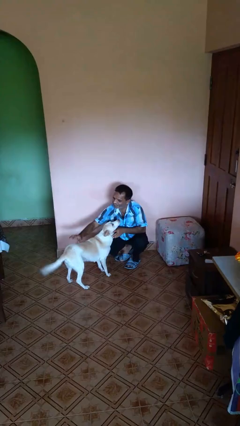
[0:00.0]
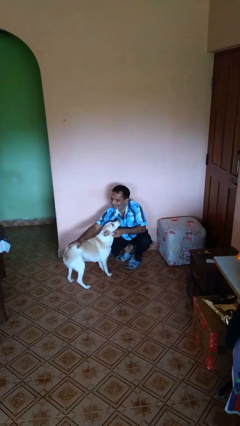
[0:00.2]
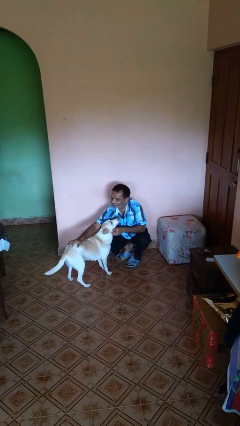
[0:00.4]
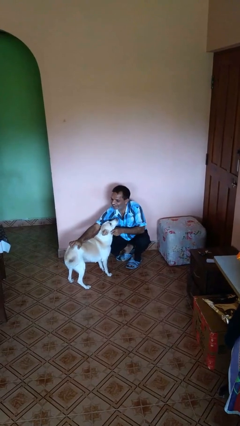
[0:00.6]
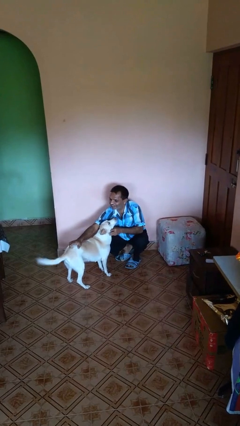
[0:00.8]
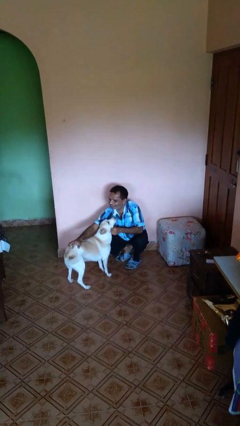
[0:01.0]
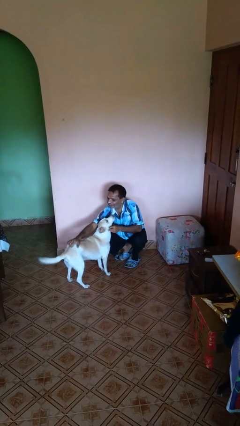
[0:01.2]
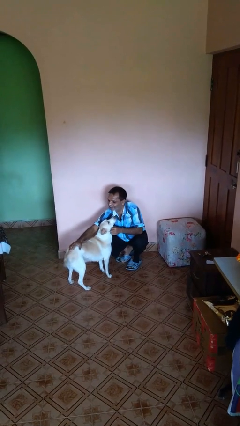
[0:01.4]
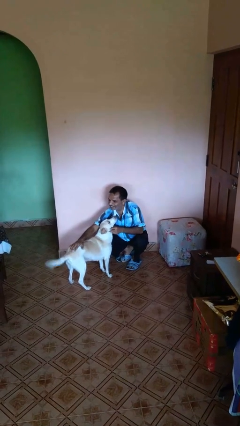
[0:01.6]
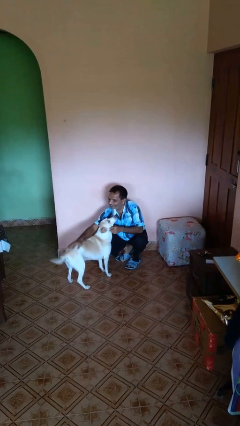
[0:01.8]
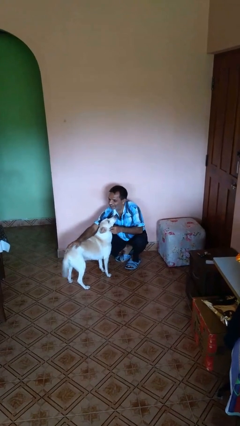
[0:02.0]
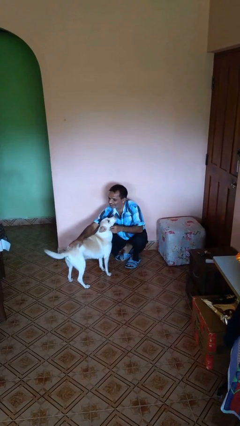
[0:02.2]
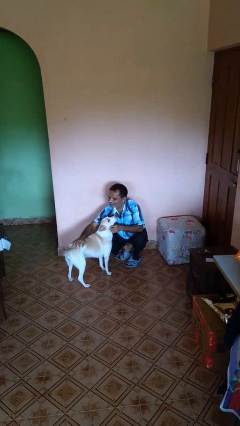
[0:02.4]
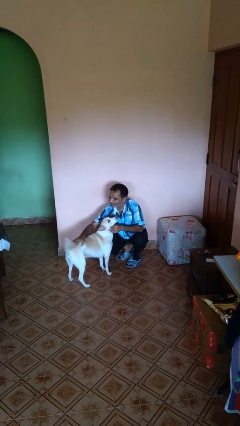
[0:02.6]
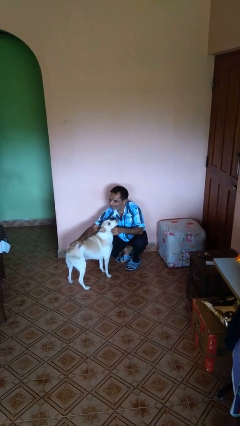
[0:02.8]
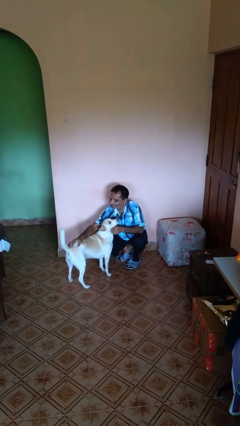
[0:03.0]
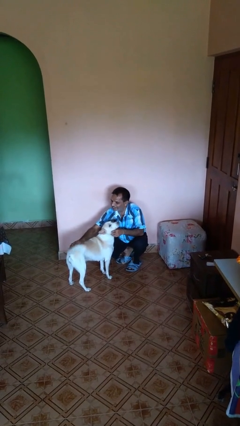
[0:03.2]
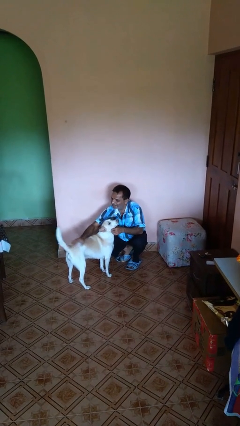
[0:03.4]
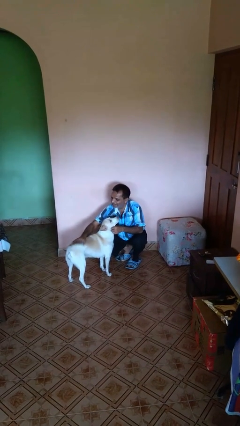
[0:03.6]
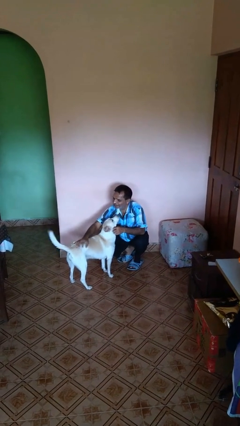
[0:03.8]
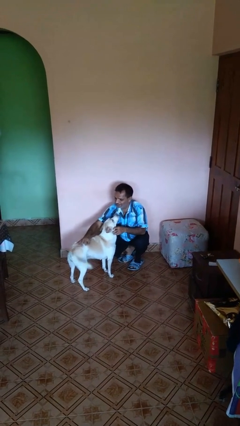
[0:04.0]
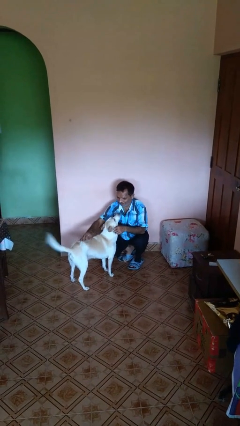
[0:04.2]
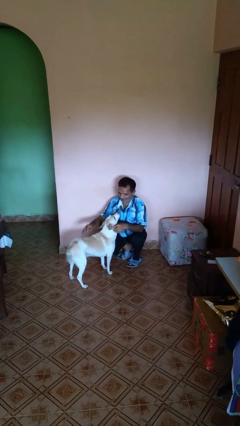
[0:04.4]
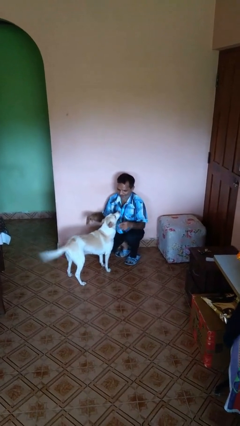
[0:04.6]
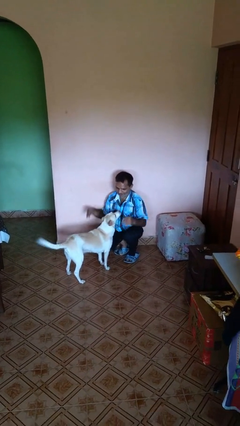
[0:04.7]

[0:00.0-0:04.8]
person pets dog

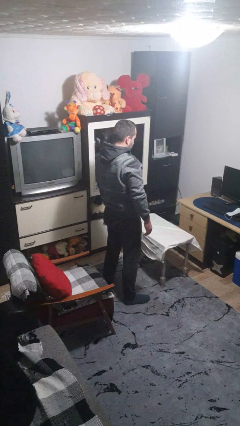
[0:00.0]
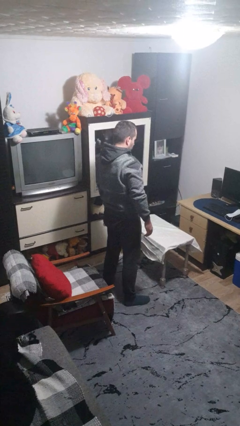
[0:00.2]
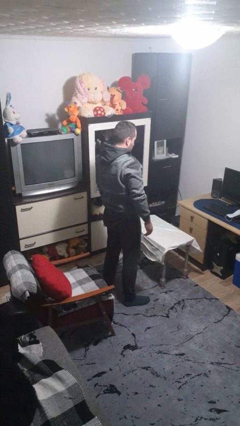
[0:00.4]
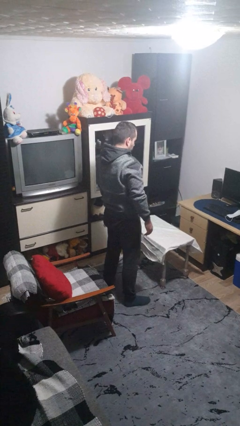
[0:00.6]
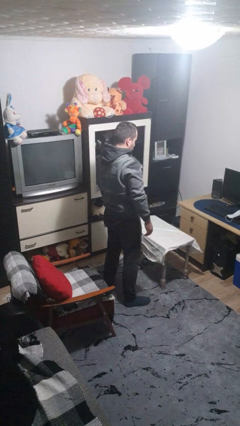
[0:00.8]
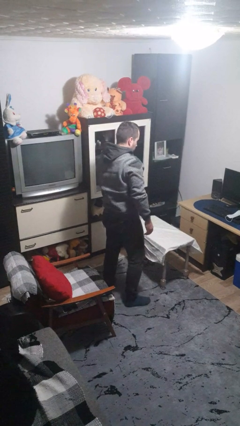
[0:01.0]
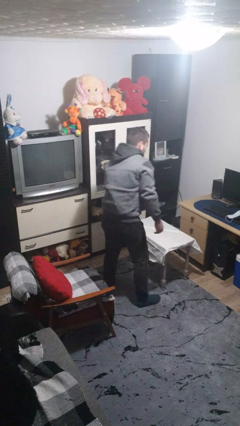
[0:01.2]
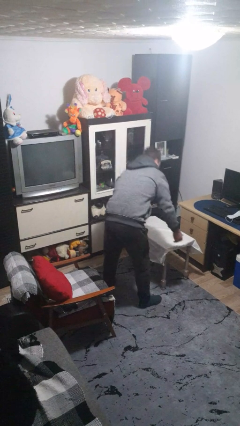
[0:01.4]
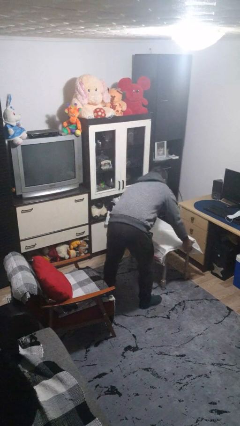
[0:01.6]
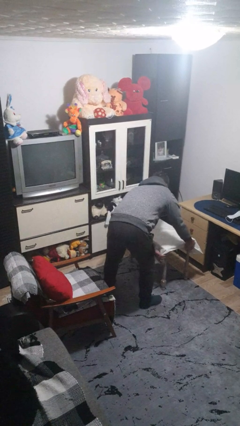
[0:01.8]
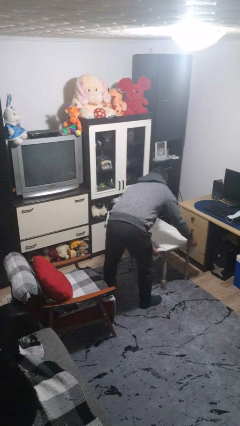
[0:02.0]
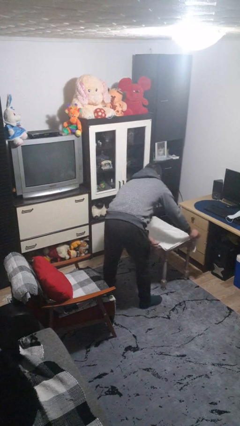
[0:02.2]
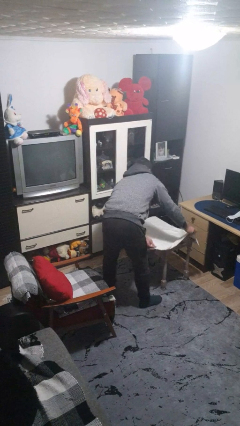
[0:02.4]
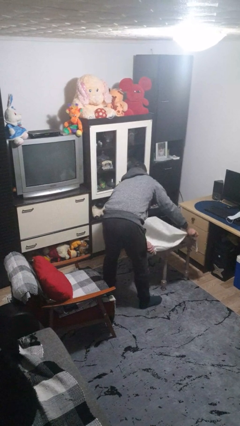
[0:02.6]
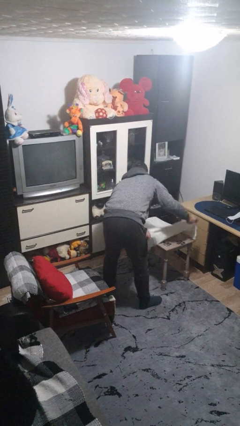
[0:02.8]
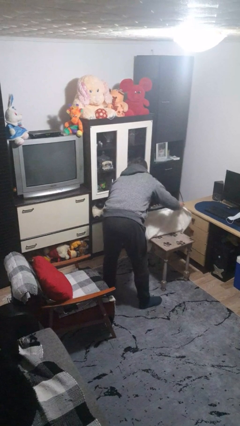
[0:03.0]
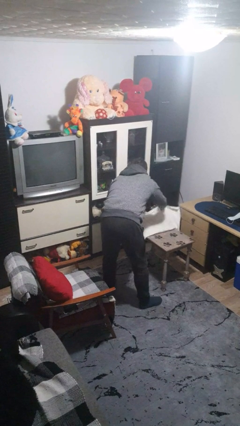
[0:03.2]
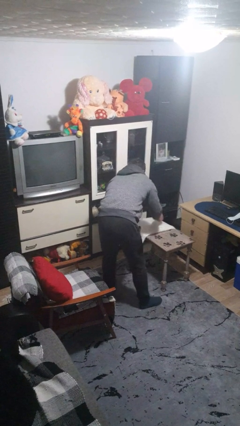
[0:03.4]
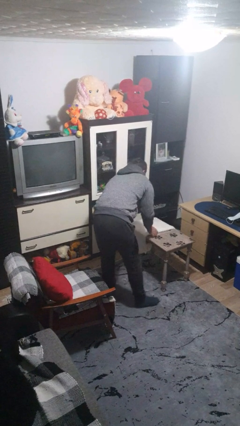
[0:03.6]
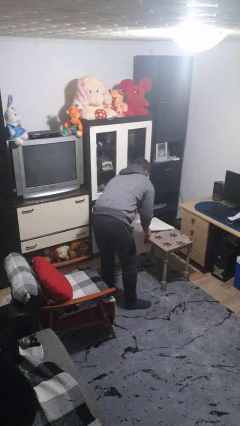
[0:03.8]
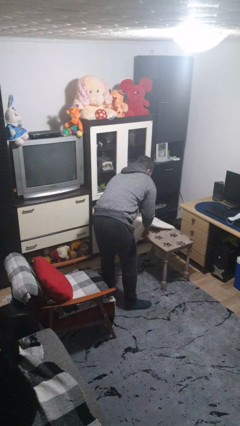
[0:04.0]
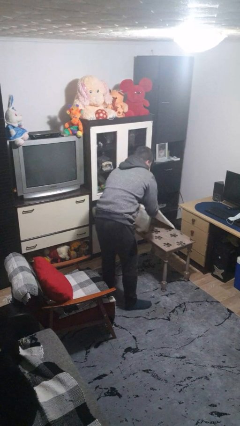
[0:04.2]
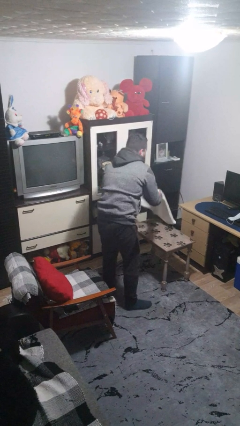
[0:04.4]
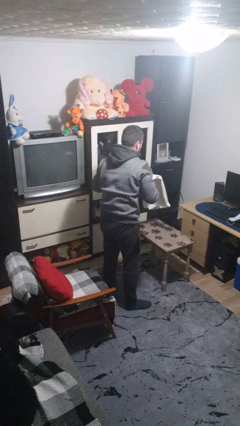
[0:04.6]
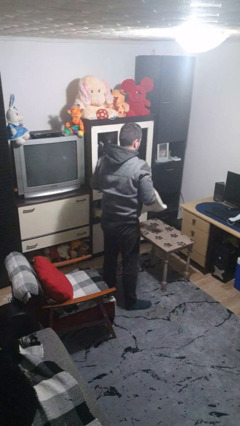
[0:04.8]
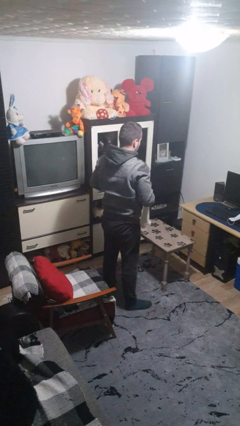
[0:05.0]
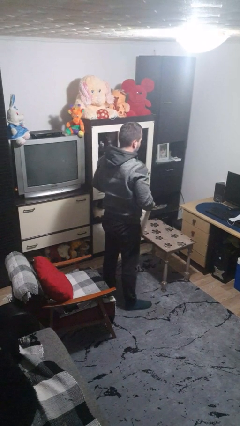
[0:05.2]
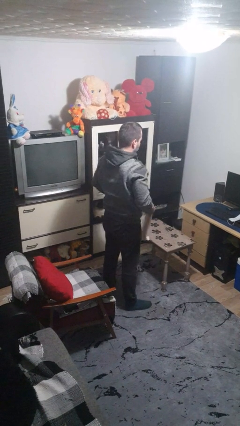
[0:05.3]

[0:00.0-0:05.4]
person folds tablecloth

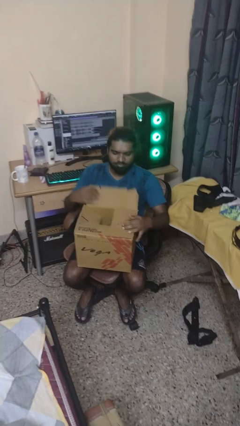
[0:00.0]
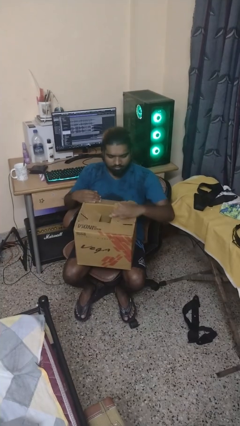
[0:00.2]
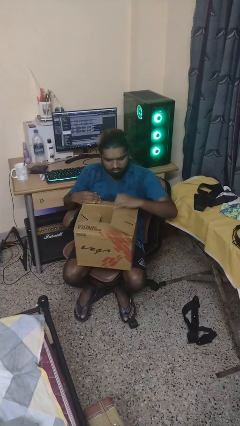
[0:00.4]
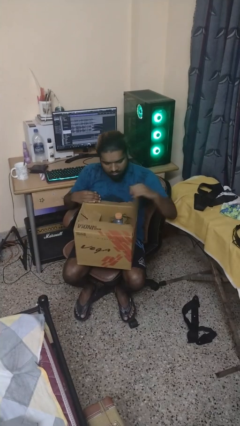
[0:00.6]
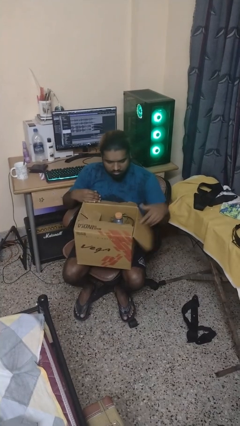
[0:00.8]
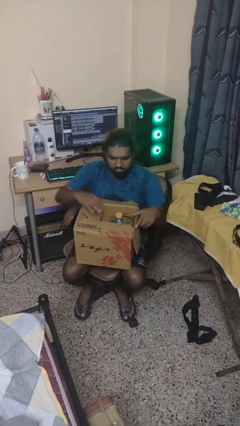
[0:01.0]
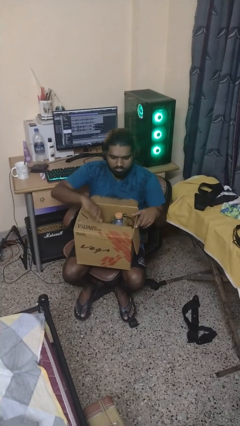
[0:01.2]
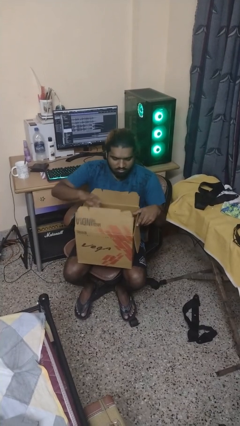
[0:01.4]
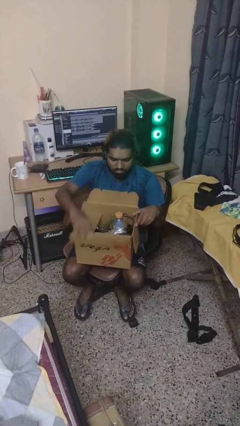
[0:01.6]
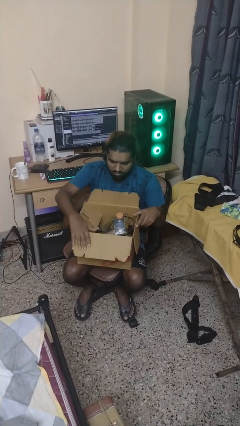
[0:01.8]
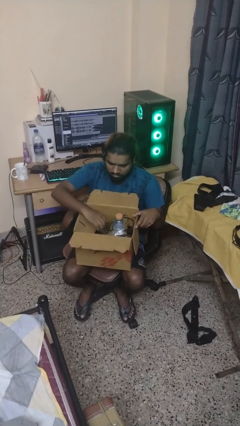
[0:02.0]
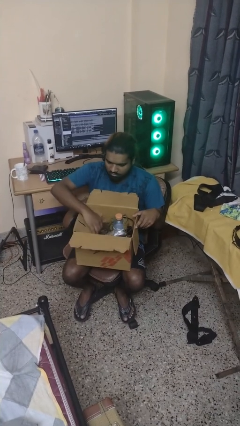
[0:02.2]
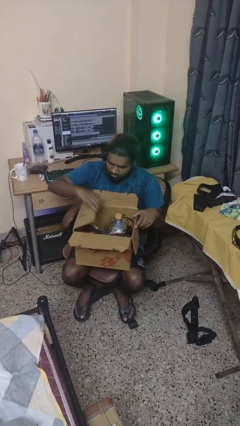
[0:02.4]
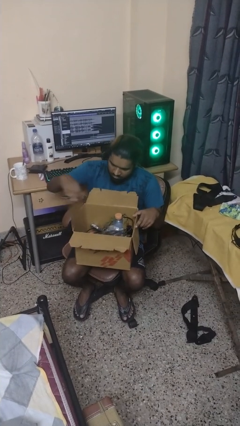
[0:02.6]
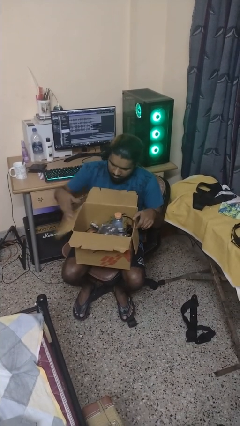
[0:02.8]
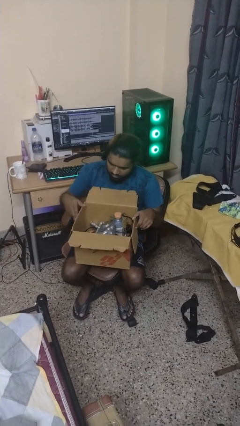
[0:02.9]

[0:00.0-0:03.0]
person opens box

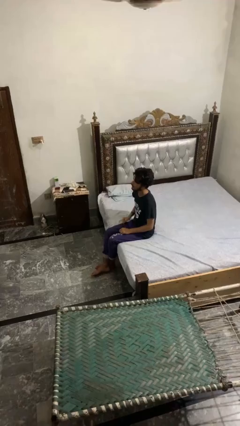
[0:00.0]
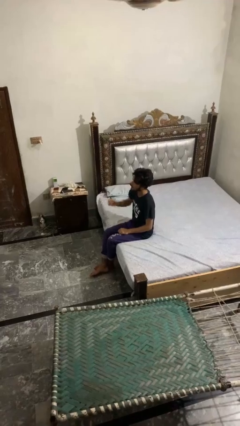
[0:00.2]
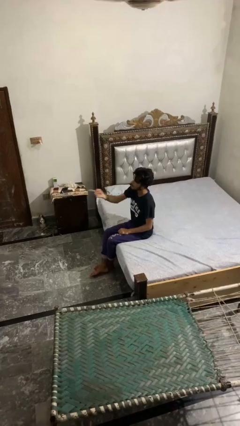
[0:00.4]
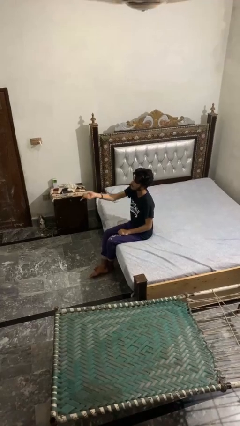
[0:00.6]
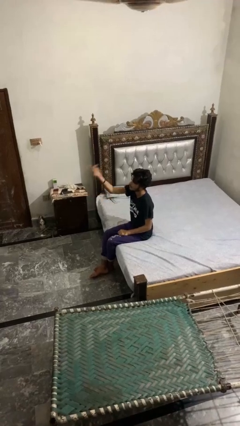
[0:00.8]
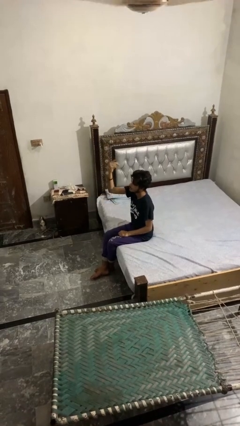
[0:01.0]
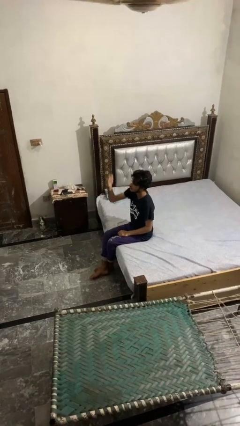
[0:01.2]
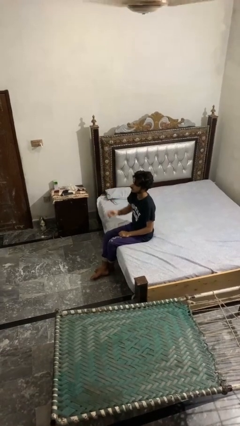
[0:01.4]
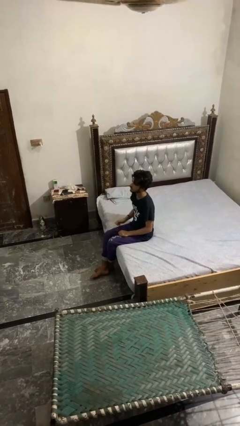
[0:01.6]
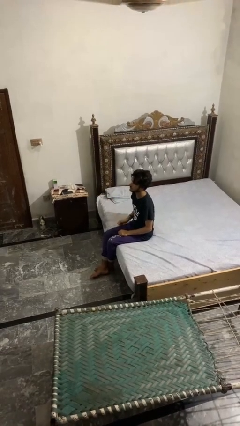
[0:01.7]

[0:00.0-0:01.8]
person gestures swipe up

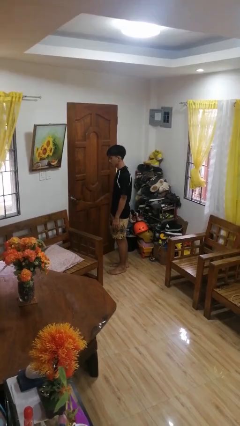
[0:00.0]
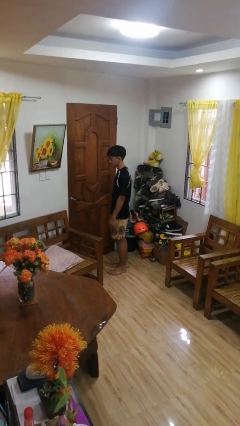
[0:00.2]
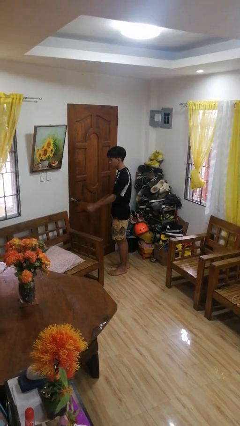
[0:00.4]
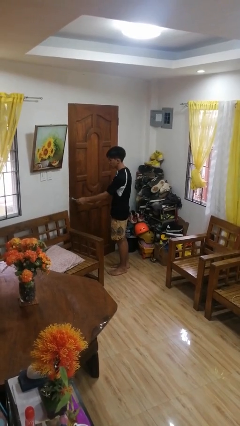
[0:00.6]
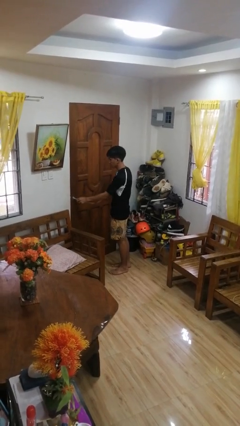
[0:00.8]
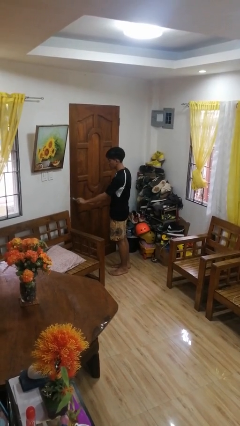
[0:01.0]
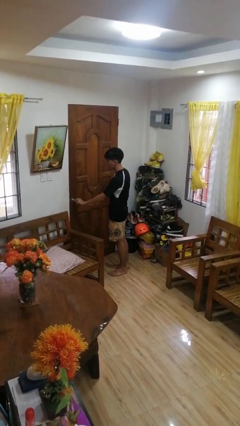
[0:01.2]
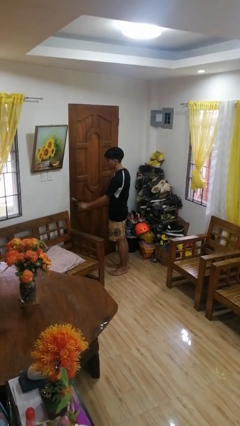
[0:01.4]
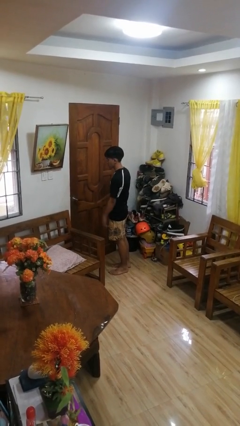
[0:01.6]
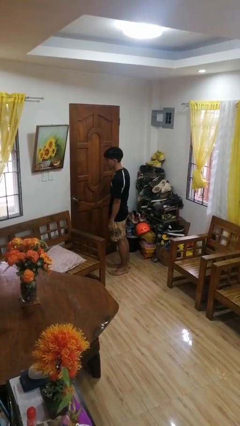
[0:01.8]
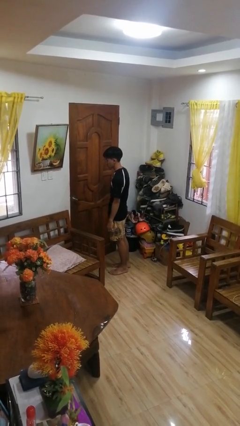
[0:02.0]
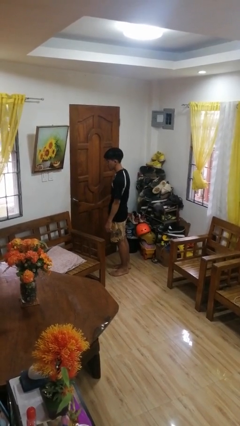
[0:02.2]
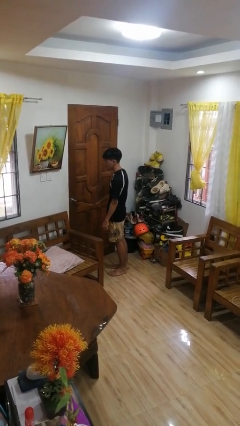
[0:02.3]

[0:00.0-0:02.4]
person unlocks door with keys
